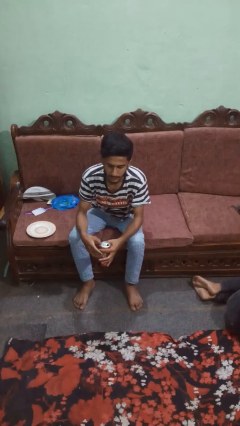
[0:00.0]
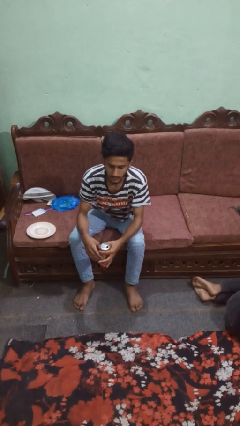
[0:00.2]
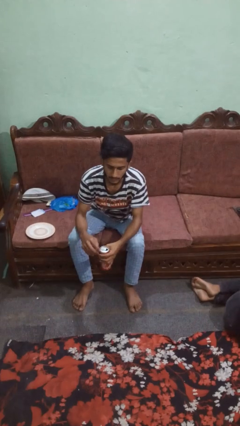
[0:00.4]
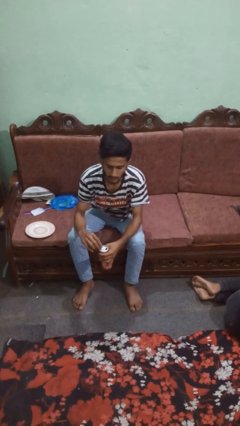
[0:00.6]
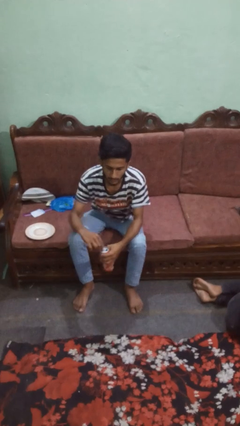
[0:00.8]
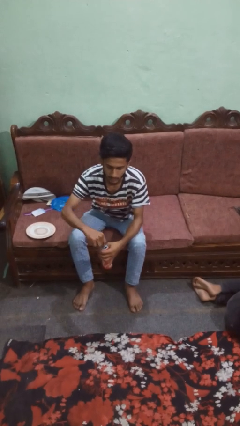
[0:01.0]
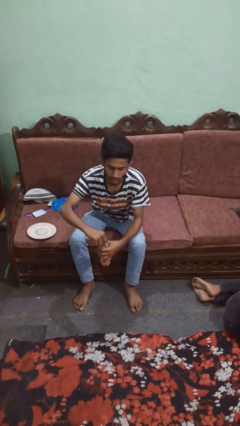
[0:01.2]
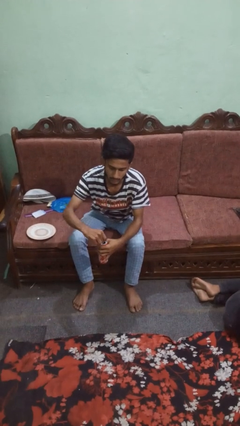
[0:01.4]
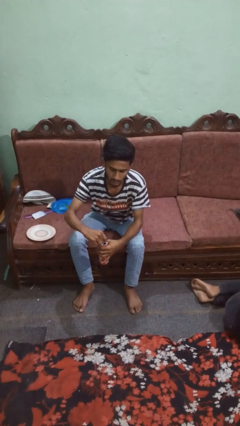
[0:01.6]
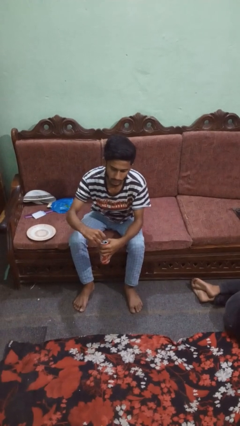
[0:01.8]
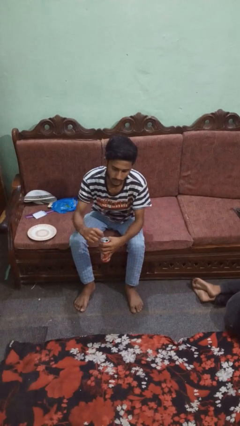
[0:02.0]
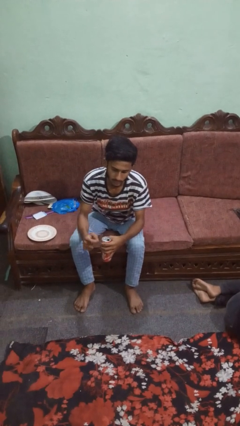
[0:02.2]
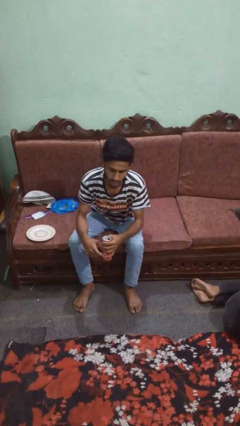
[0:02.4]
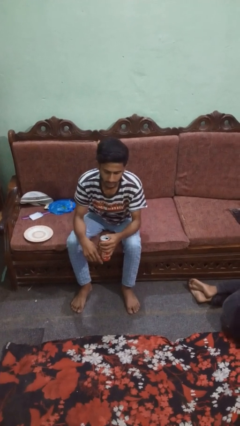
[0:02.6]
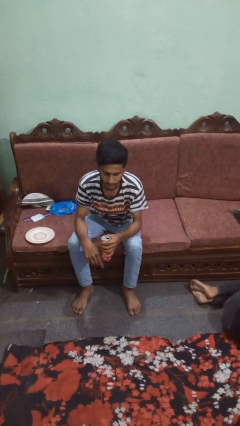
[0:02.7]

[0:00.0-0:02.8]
person opens beverage can

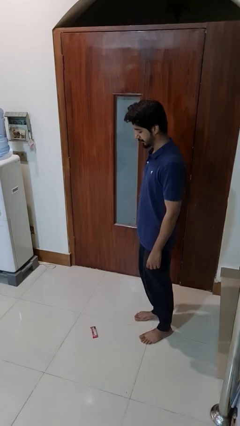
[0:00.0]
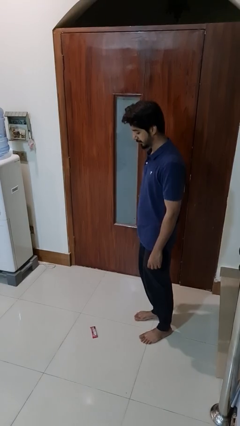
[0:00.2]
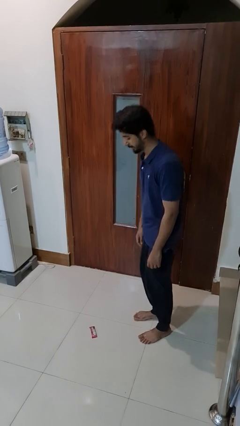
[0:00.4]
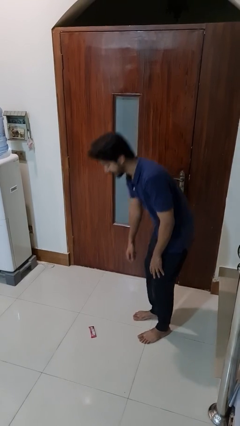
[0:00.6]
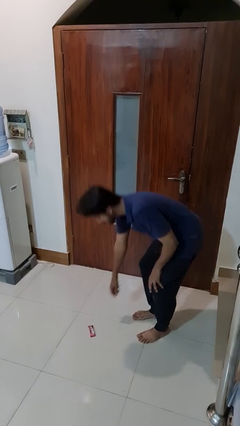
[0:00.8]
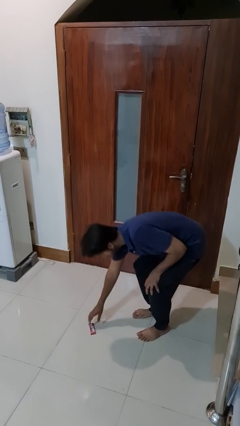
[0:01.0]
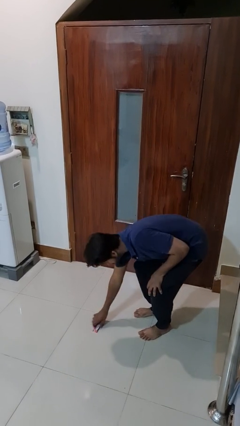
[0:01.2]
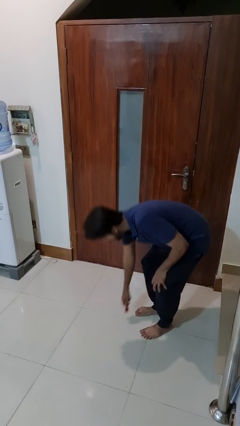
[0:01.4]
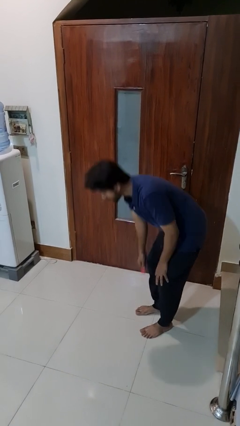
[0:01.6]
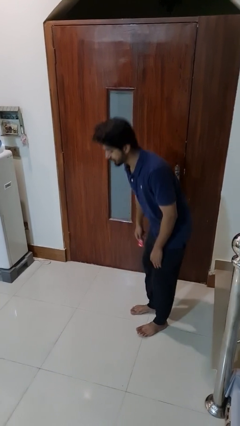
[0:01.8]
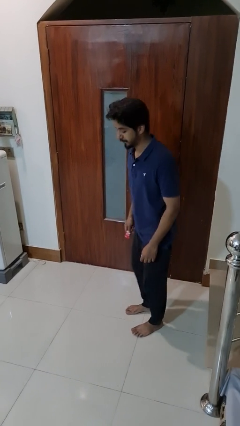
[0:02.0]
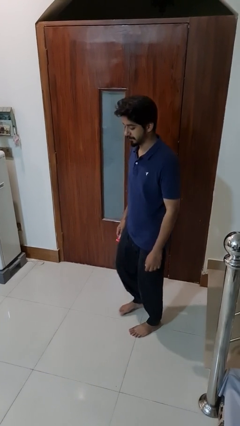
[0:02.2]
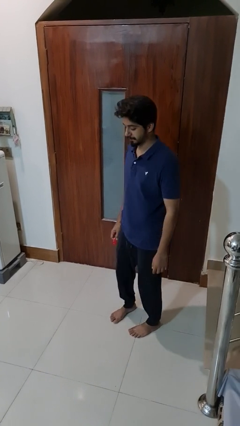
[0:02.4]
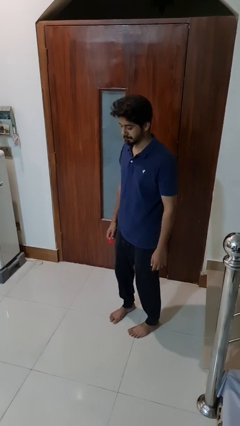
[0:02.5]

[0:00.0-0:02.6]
person picks up object from floor

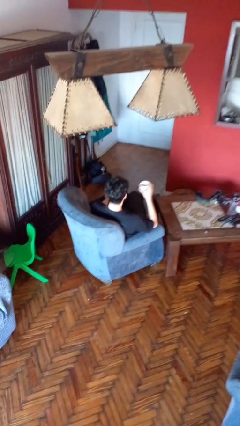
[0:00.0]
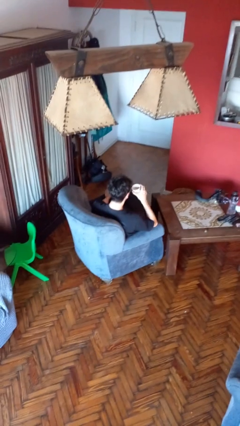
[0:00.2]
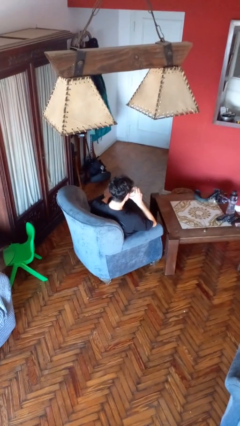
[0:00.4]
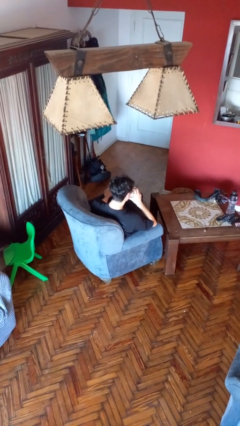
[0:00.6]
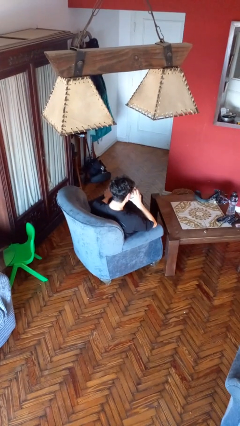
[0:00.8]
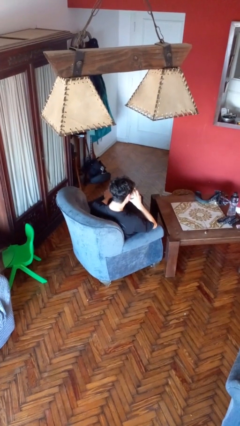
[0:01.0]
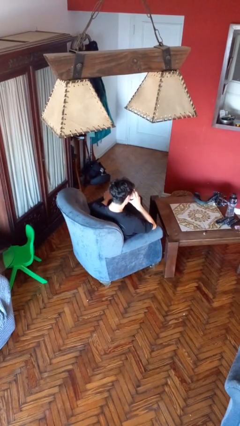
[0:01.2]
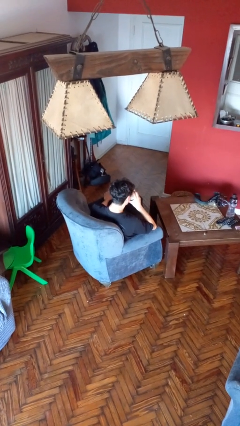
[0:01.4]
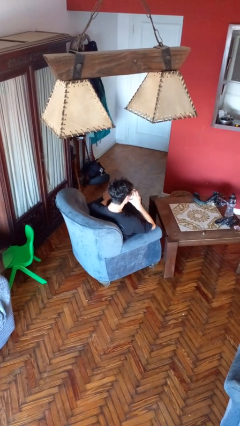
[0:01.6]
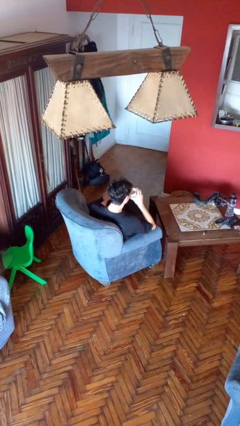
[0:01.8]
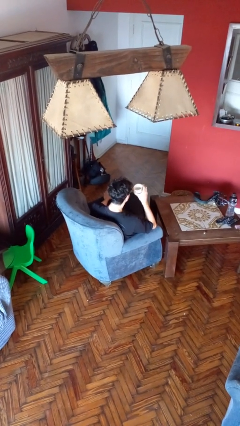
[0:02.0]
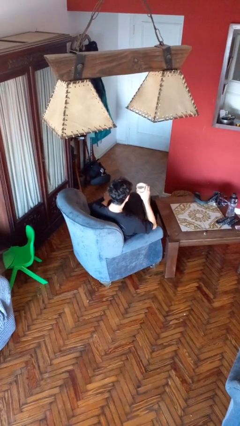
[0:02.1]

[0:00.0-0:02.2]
person drinks from mug

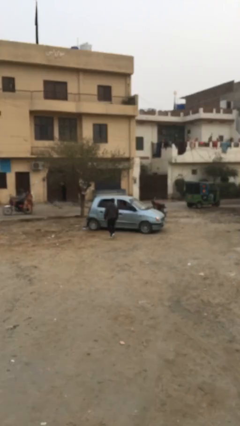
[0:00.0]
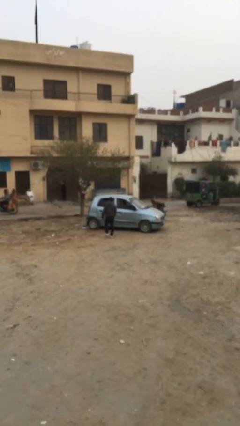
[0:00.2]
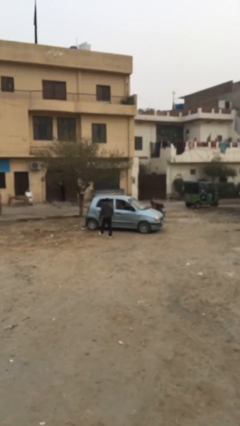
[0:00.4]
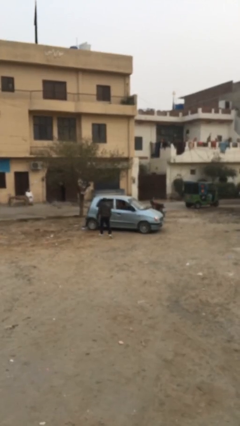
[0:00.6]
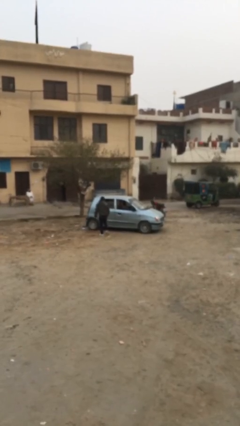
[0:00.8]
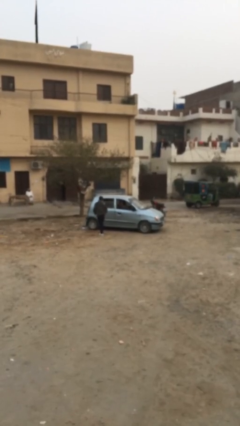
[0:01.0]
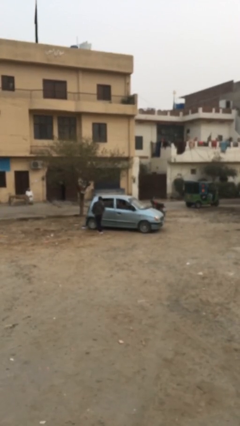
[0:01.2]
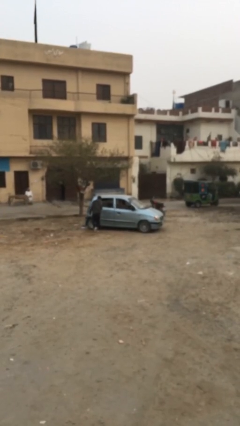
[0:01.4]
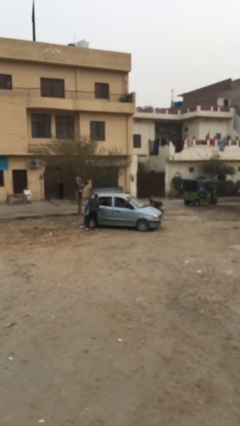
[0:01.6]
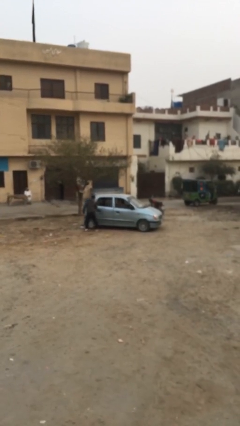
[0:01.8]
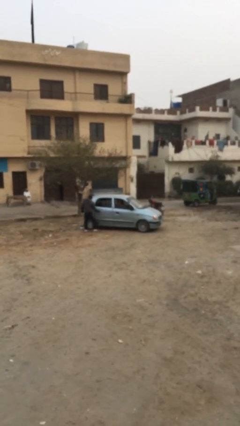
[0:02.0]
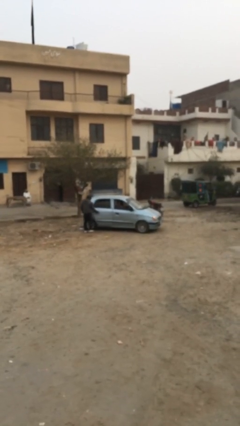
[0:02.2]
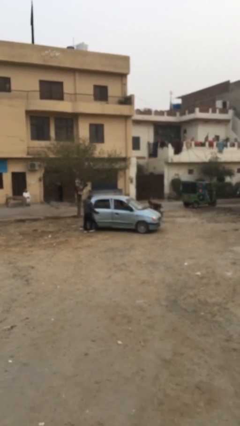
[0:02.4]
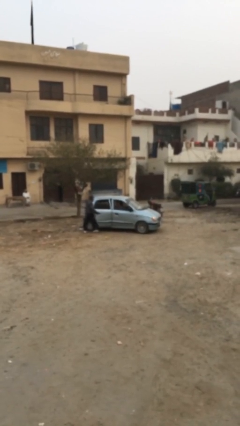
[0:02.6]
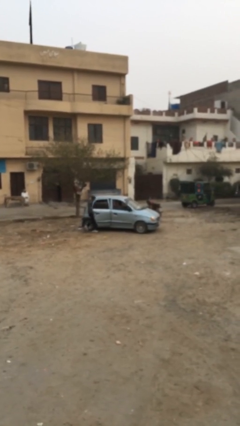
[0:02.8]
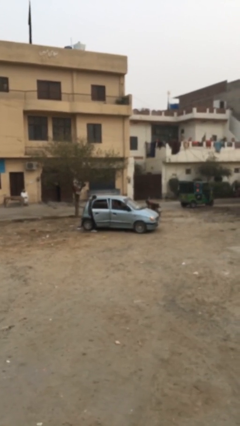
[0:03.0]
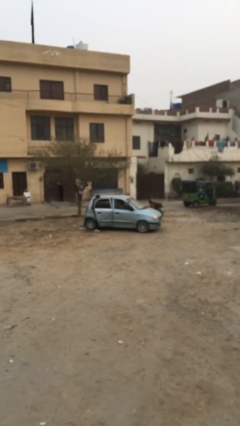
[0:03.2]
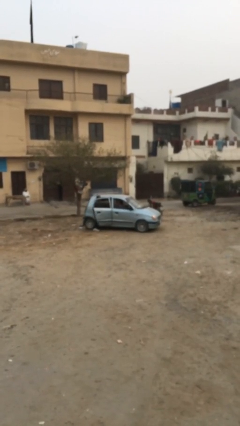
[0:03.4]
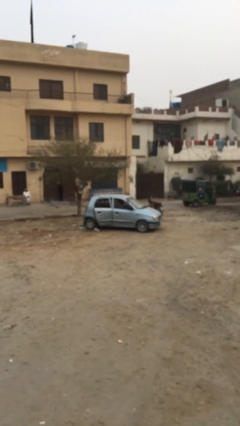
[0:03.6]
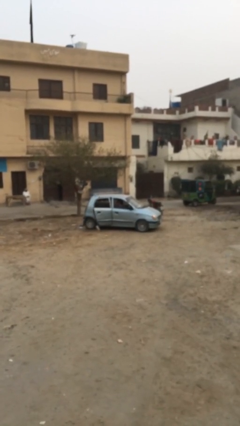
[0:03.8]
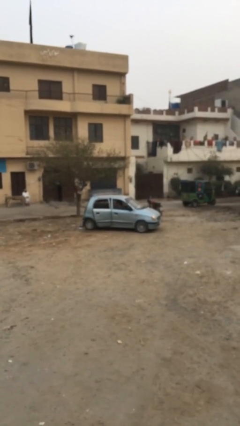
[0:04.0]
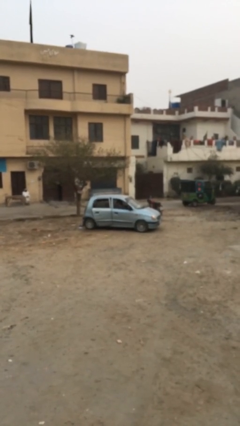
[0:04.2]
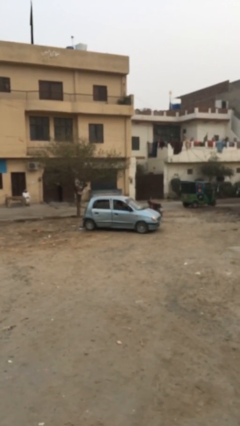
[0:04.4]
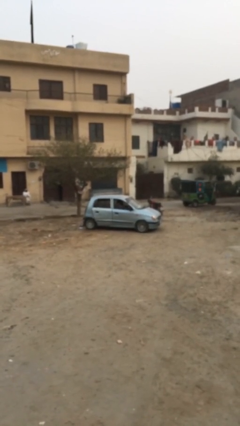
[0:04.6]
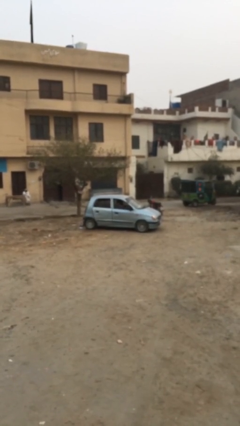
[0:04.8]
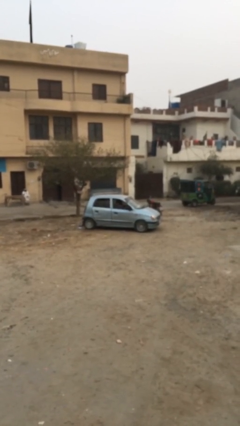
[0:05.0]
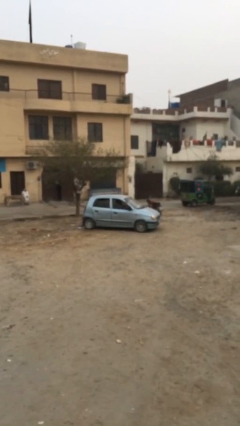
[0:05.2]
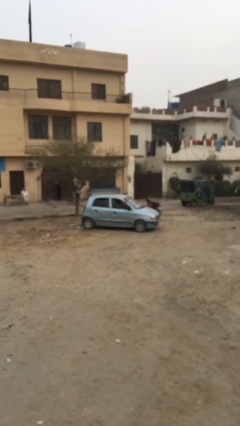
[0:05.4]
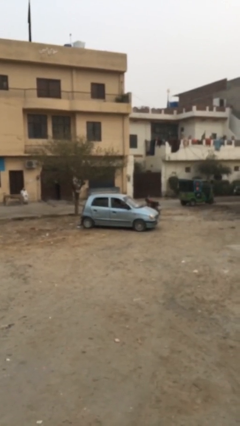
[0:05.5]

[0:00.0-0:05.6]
car picks up person

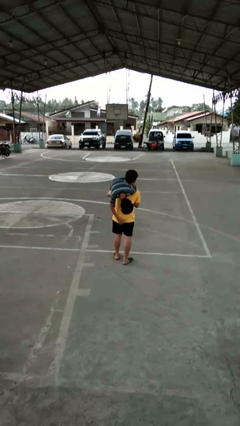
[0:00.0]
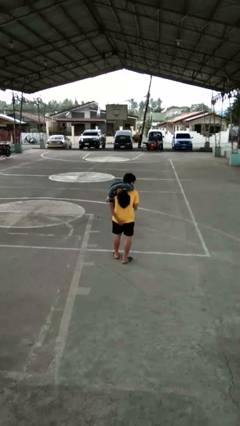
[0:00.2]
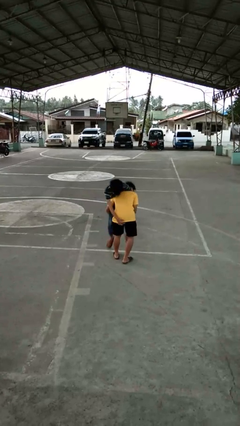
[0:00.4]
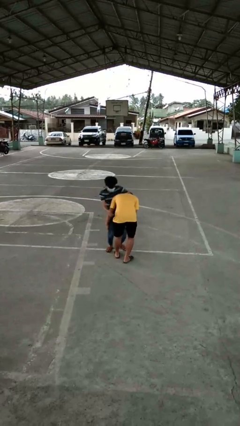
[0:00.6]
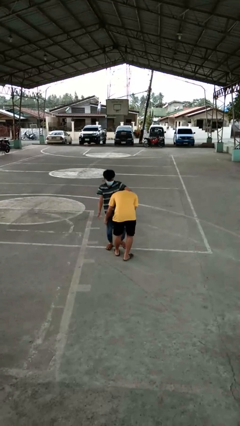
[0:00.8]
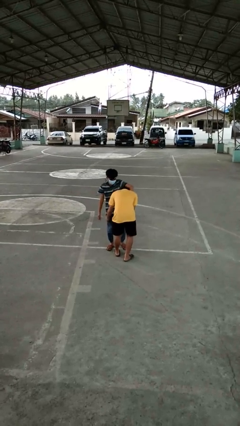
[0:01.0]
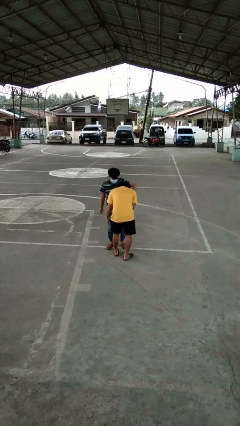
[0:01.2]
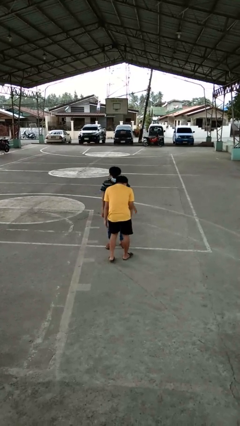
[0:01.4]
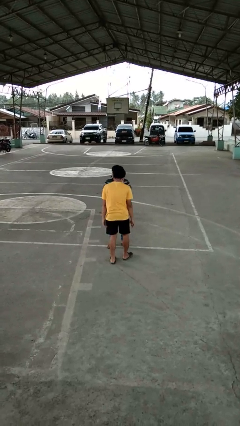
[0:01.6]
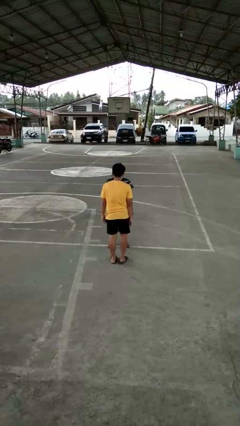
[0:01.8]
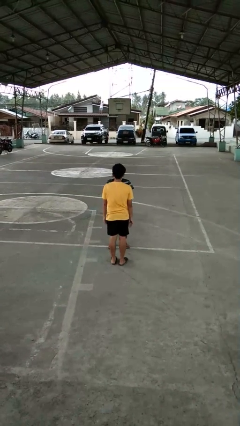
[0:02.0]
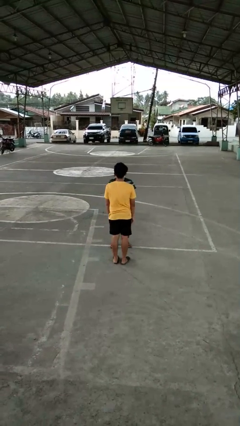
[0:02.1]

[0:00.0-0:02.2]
person puts down person

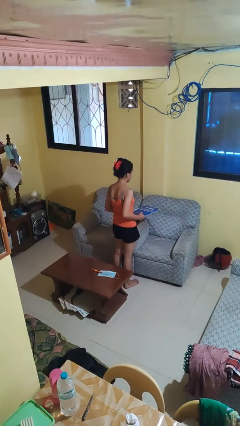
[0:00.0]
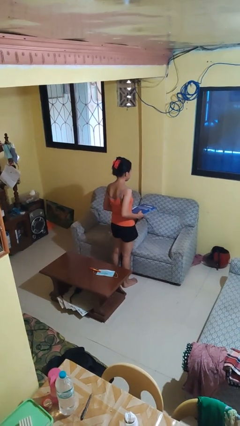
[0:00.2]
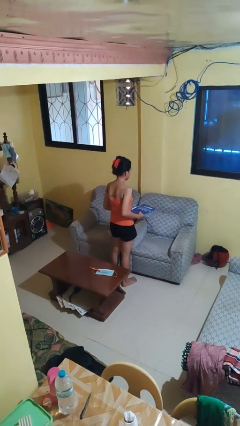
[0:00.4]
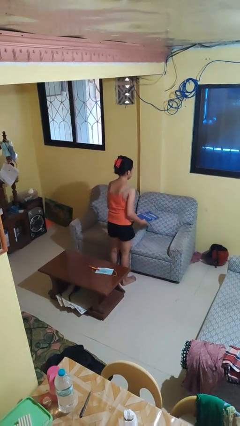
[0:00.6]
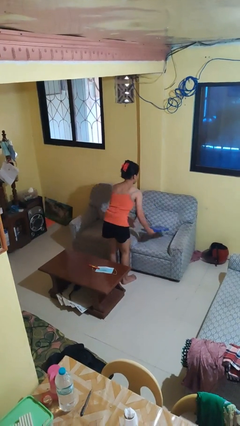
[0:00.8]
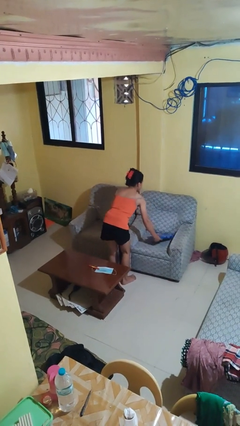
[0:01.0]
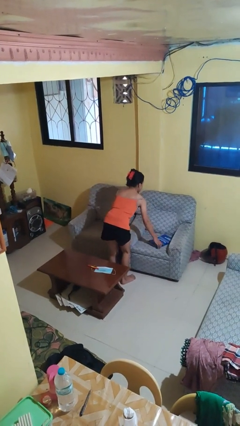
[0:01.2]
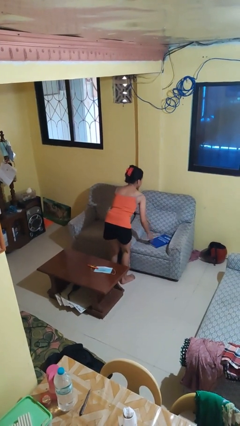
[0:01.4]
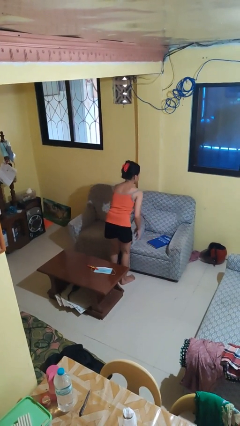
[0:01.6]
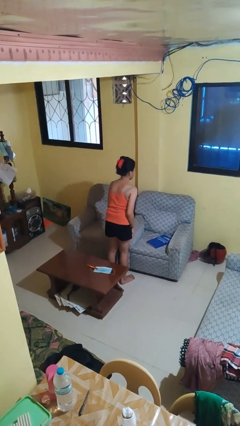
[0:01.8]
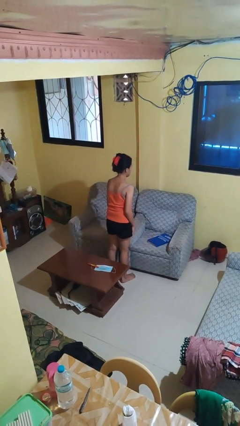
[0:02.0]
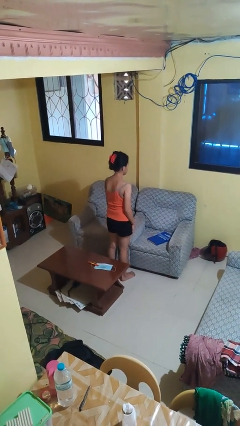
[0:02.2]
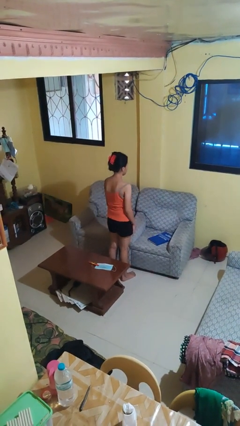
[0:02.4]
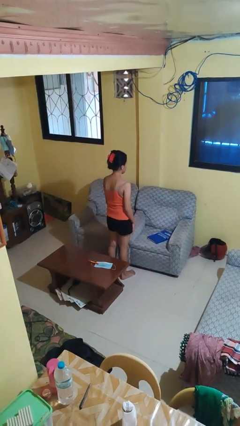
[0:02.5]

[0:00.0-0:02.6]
person puts down object on couch
